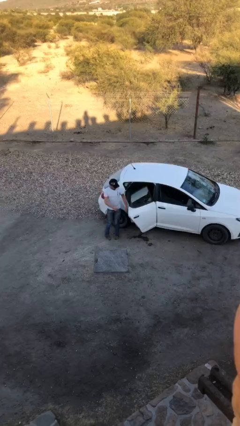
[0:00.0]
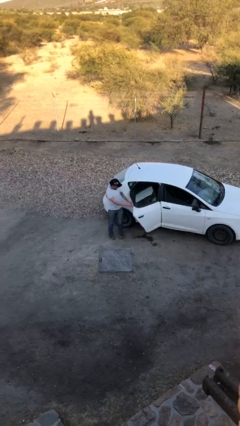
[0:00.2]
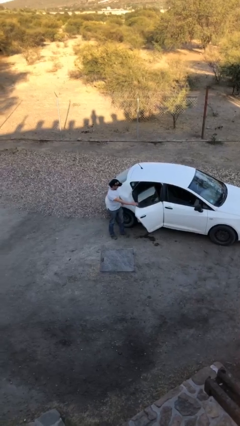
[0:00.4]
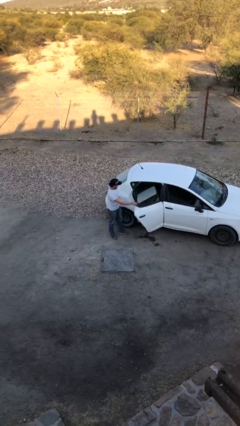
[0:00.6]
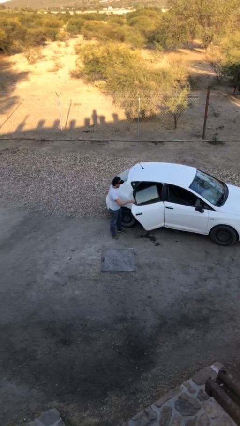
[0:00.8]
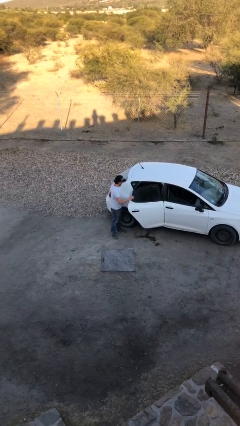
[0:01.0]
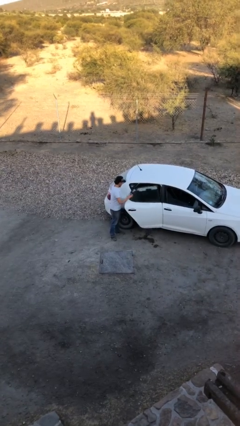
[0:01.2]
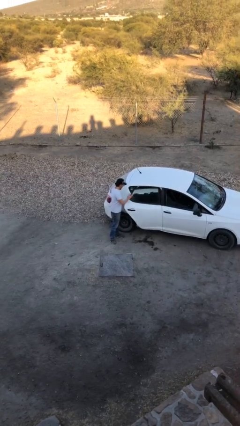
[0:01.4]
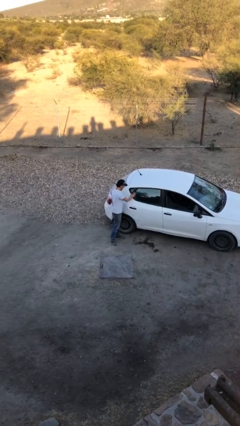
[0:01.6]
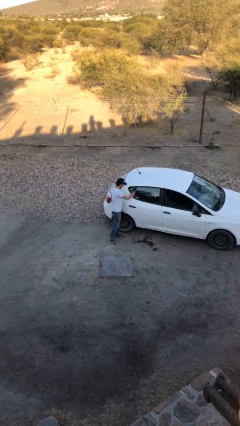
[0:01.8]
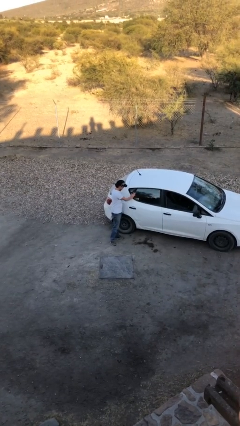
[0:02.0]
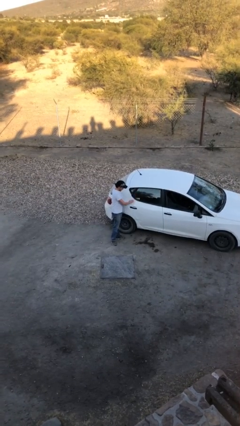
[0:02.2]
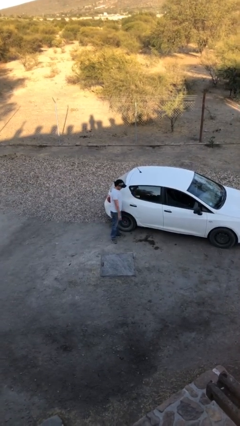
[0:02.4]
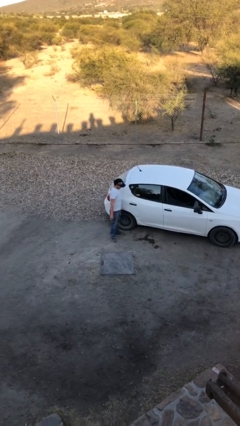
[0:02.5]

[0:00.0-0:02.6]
person closes car door

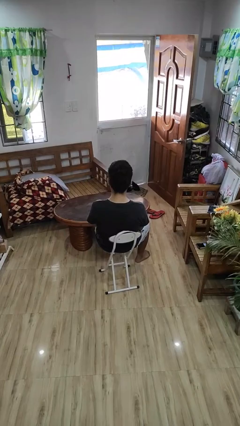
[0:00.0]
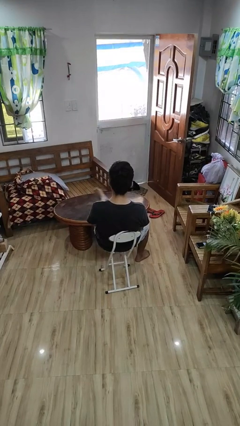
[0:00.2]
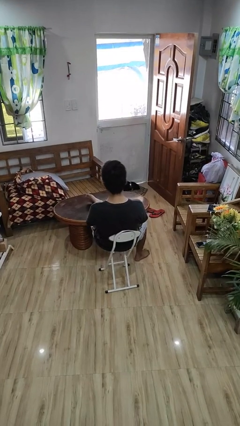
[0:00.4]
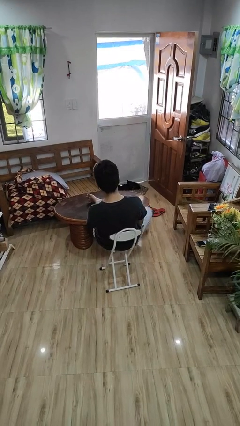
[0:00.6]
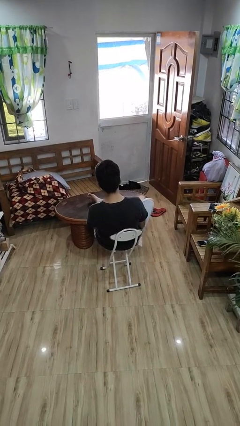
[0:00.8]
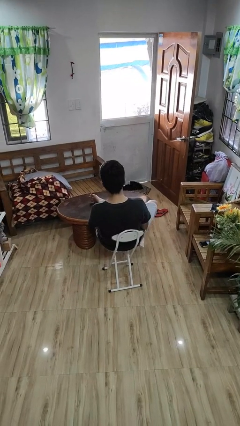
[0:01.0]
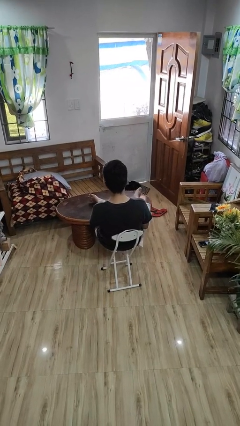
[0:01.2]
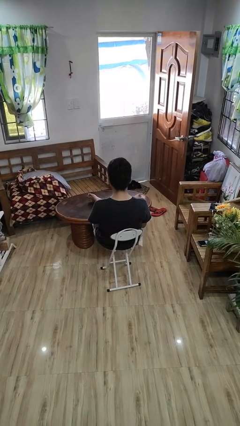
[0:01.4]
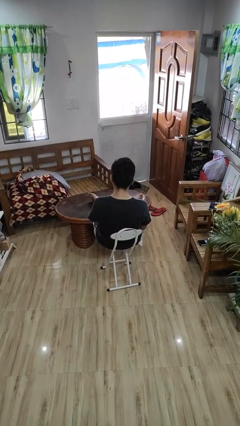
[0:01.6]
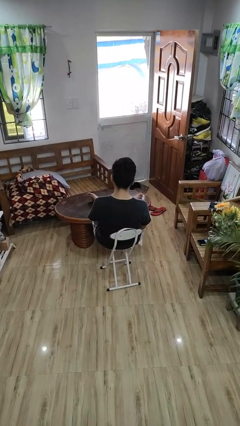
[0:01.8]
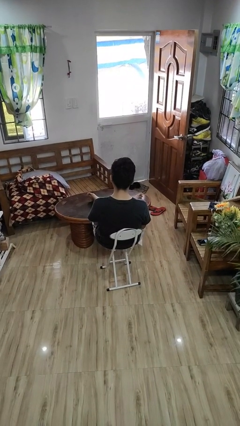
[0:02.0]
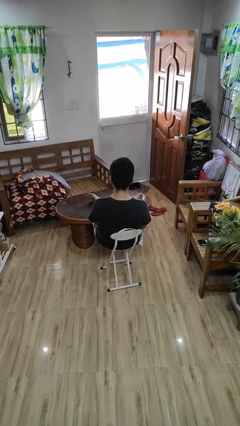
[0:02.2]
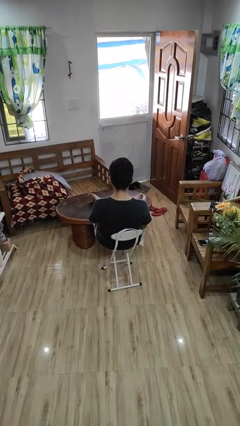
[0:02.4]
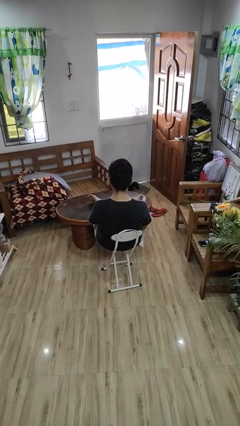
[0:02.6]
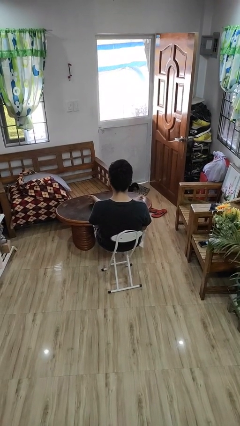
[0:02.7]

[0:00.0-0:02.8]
person puts feet up

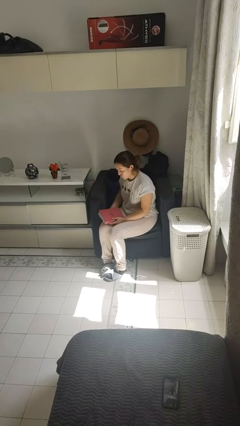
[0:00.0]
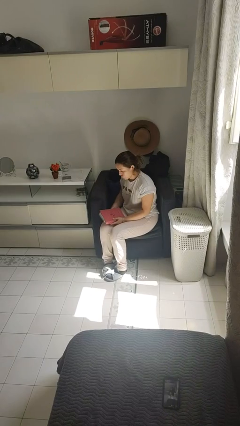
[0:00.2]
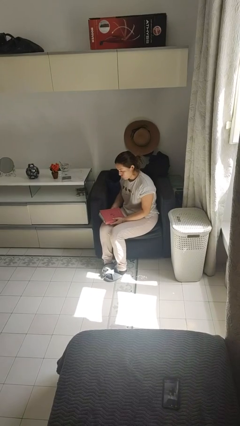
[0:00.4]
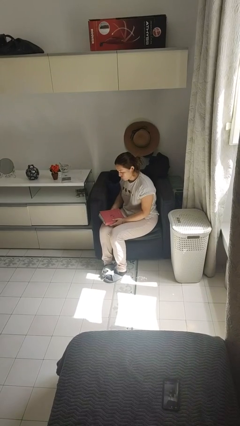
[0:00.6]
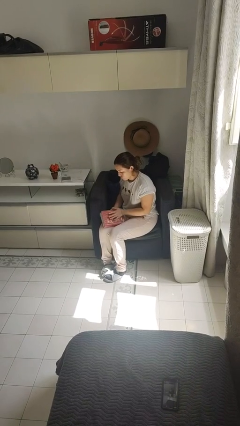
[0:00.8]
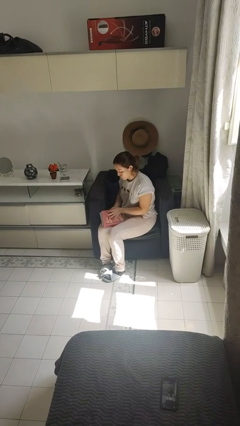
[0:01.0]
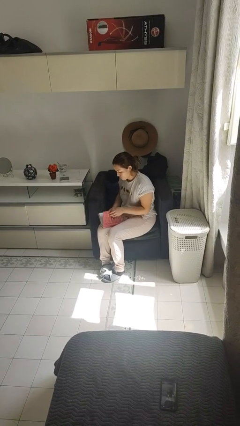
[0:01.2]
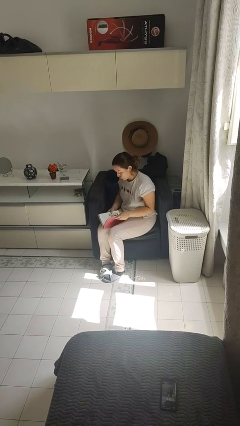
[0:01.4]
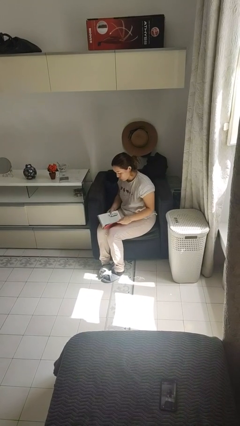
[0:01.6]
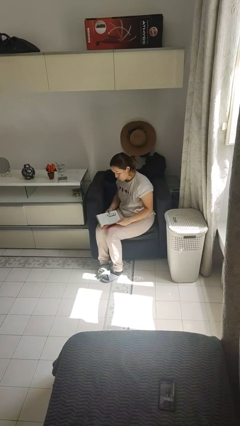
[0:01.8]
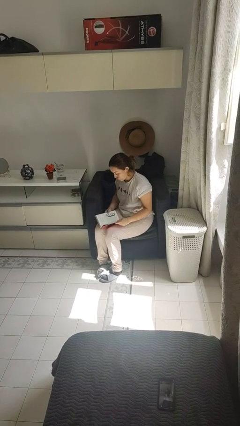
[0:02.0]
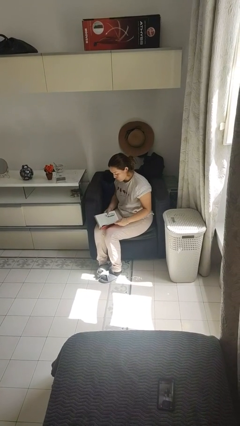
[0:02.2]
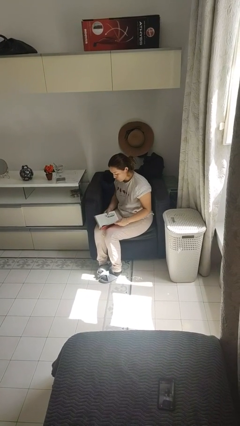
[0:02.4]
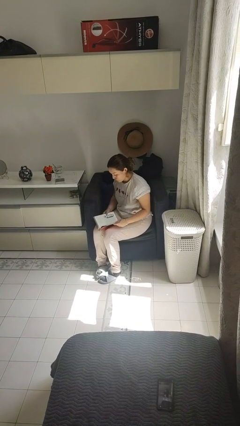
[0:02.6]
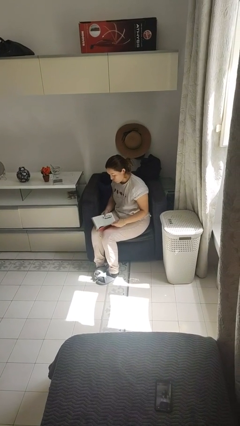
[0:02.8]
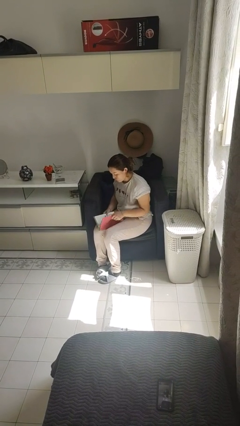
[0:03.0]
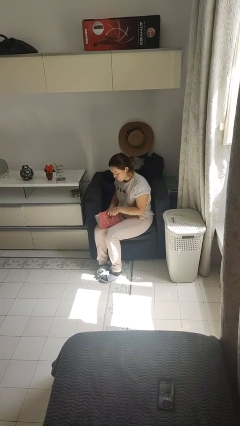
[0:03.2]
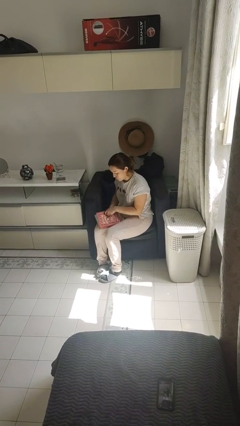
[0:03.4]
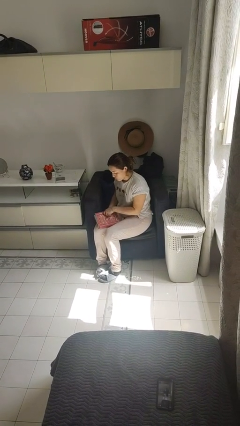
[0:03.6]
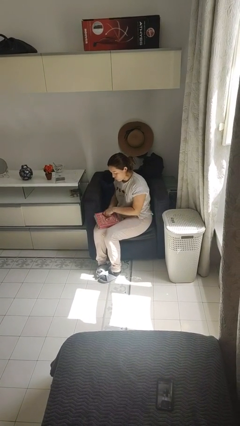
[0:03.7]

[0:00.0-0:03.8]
person reads book

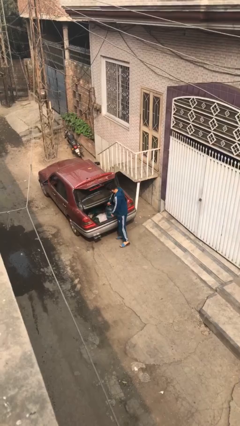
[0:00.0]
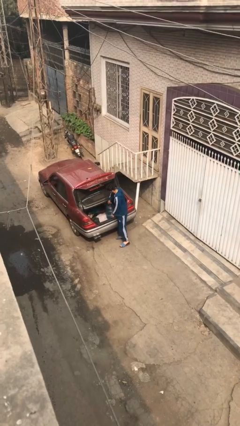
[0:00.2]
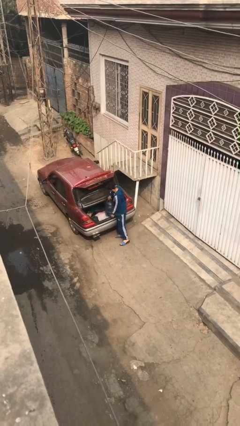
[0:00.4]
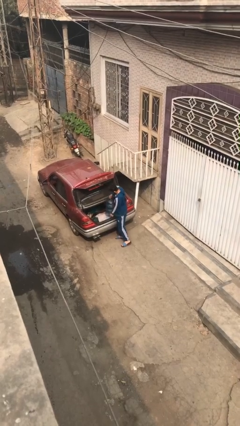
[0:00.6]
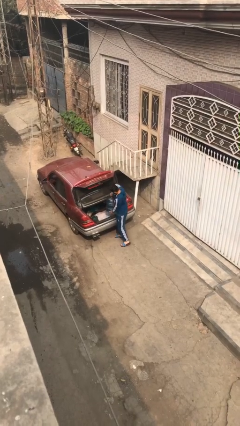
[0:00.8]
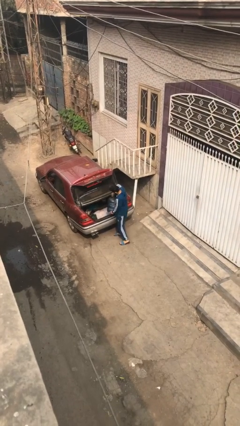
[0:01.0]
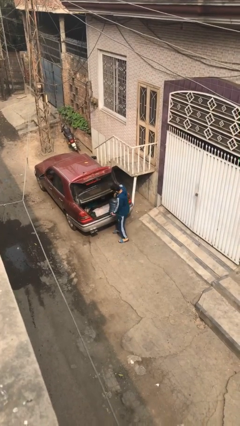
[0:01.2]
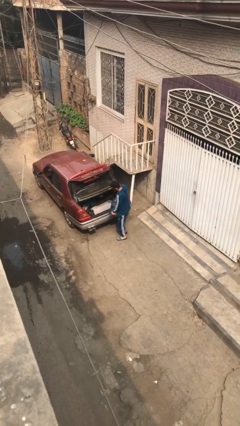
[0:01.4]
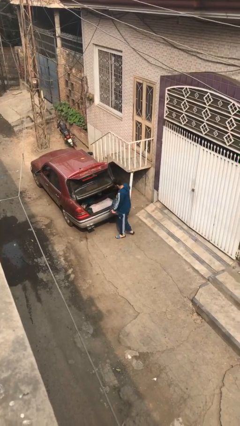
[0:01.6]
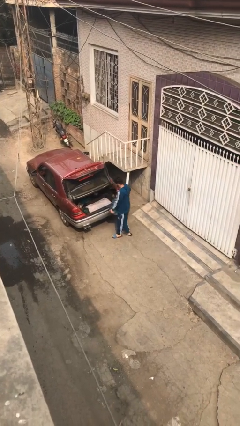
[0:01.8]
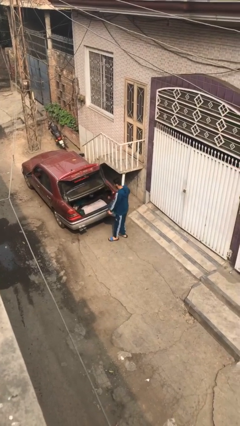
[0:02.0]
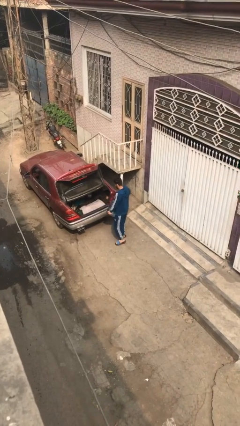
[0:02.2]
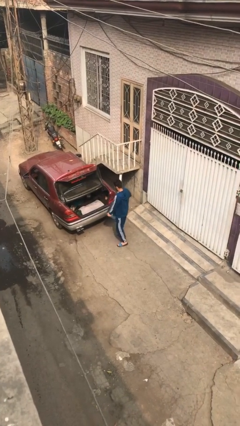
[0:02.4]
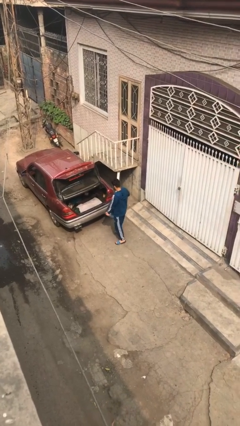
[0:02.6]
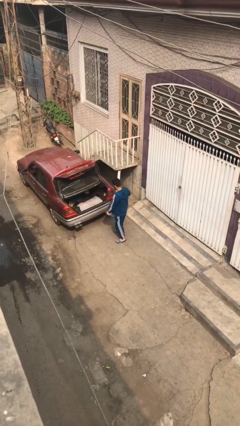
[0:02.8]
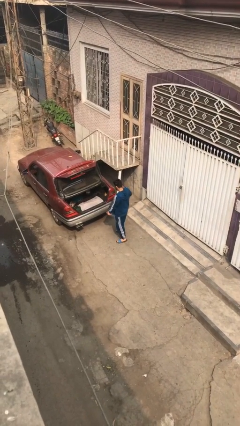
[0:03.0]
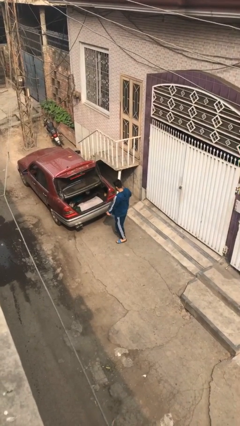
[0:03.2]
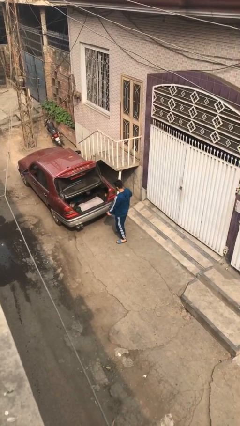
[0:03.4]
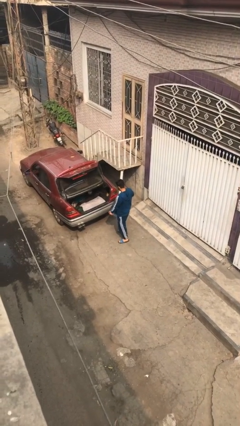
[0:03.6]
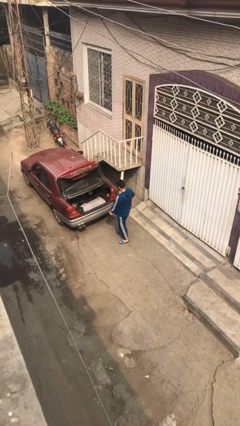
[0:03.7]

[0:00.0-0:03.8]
person unloads car

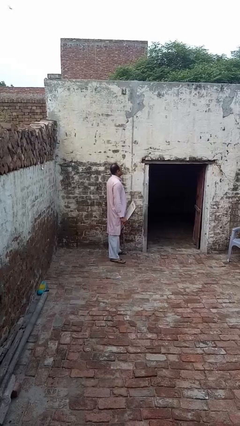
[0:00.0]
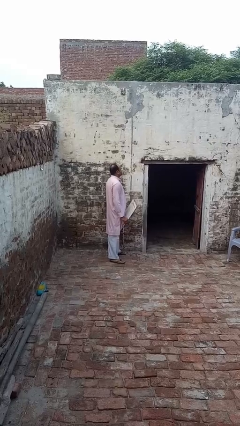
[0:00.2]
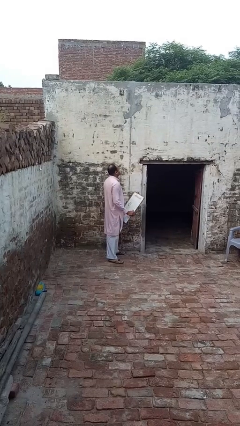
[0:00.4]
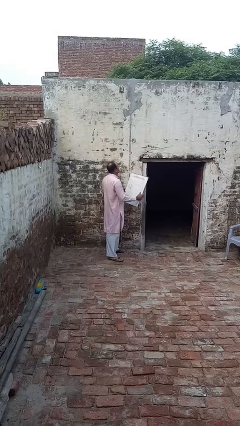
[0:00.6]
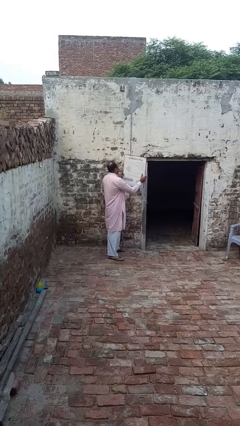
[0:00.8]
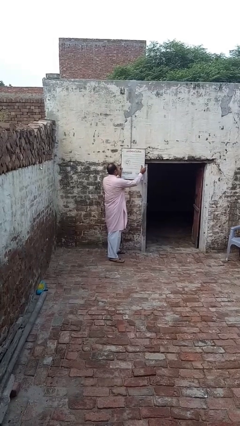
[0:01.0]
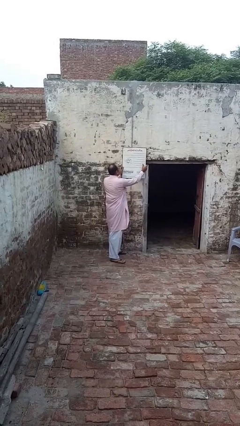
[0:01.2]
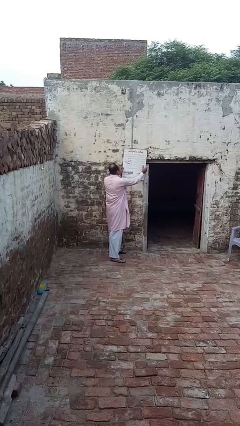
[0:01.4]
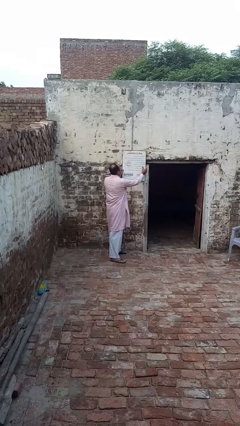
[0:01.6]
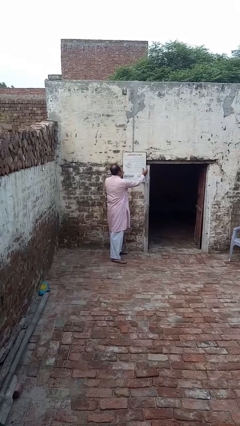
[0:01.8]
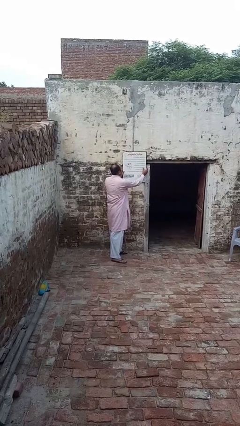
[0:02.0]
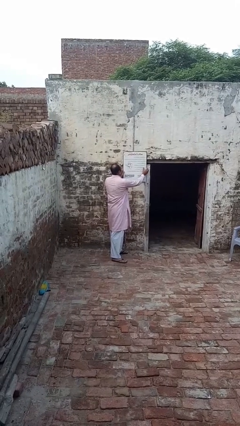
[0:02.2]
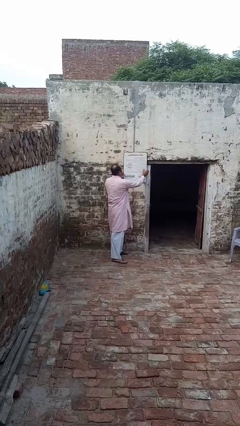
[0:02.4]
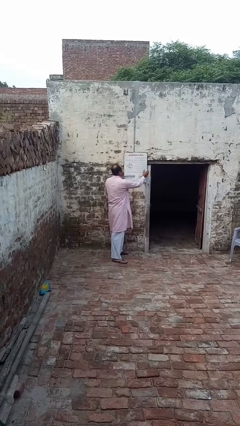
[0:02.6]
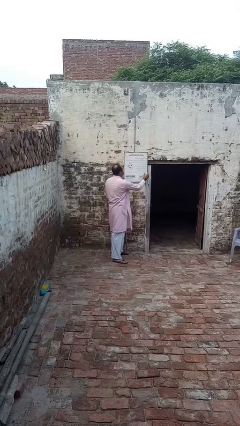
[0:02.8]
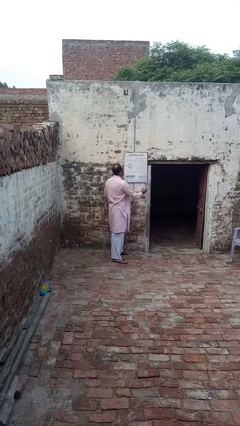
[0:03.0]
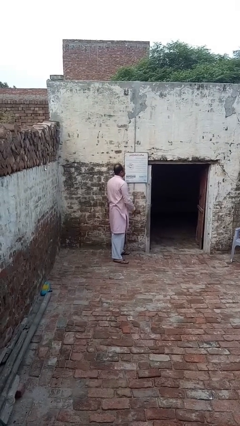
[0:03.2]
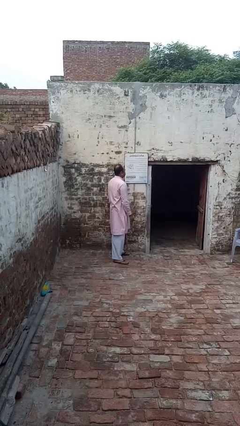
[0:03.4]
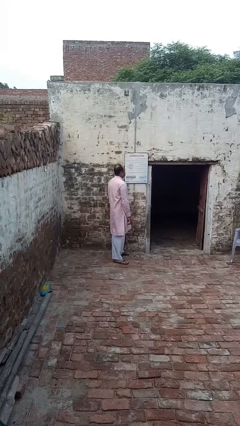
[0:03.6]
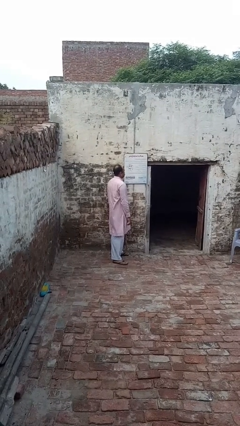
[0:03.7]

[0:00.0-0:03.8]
person puts up picture frame

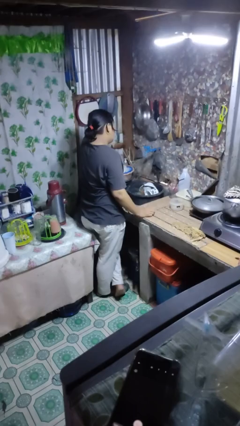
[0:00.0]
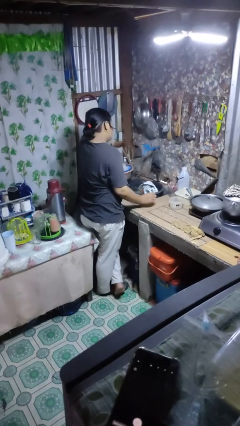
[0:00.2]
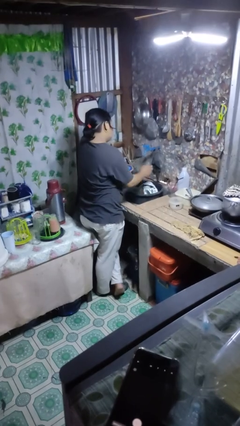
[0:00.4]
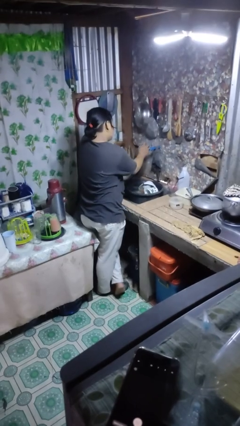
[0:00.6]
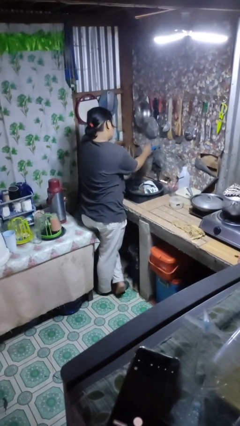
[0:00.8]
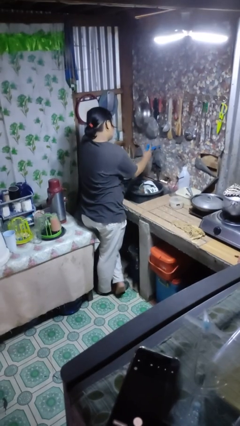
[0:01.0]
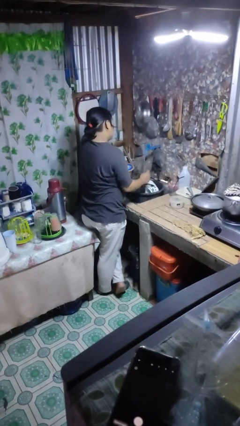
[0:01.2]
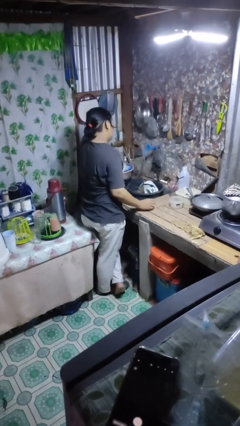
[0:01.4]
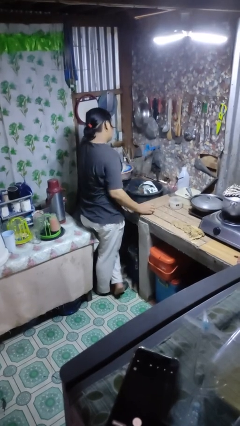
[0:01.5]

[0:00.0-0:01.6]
person turns on faucet
